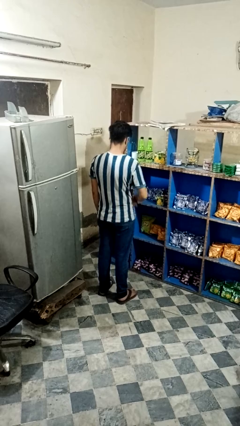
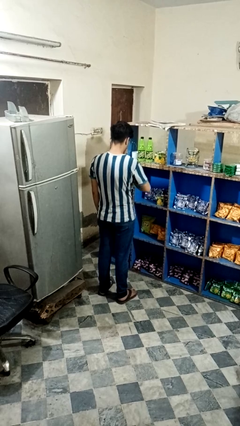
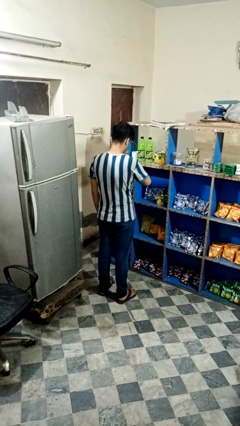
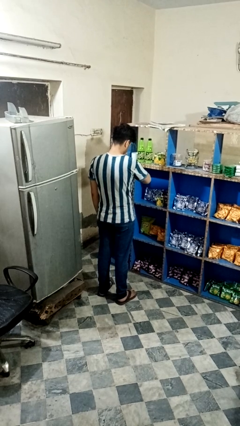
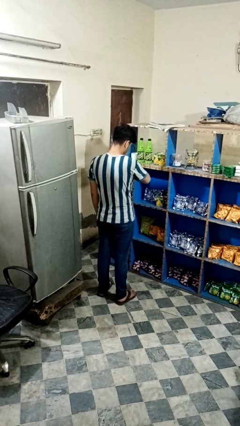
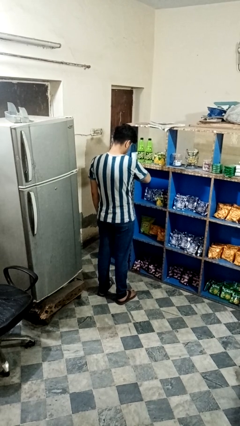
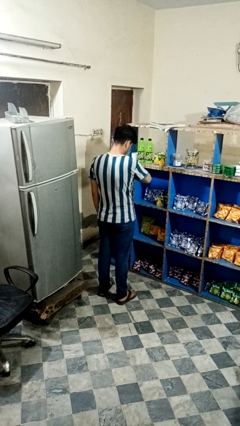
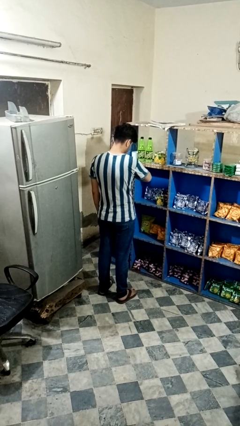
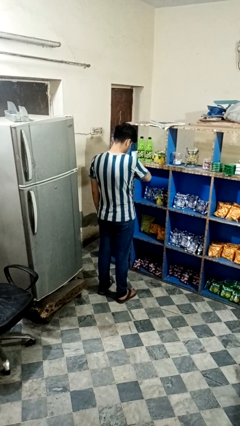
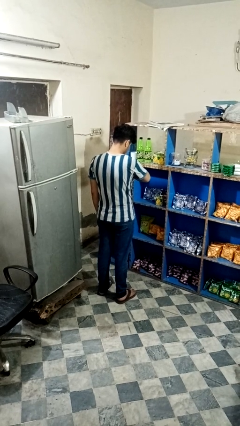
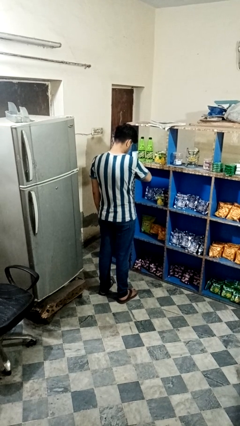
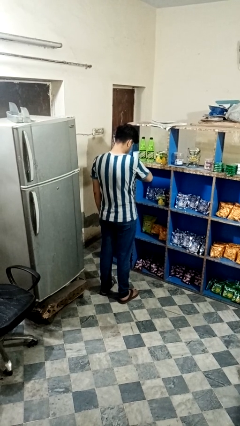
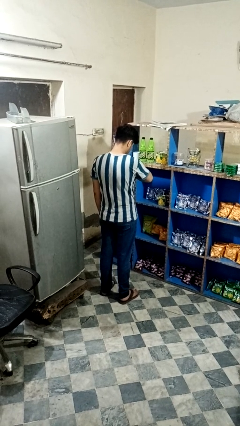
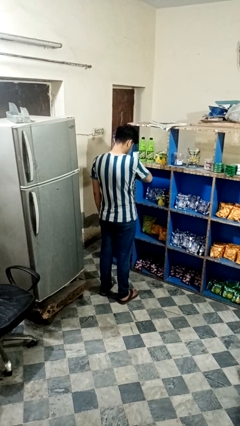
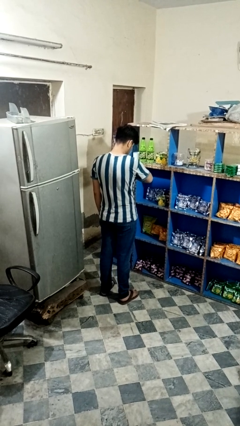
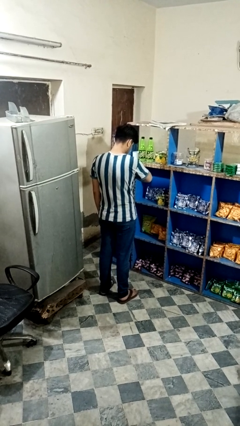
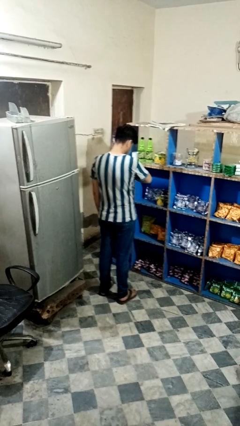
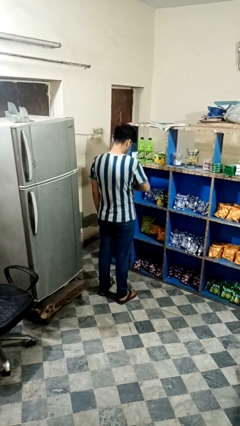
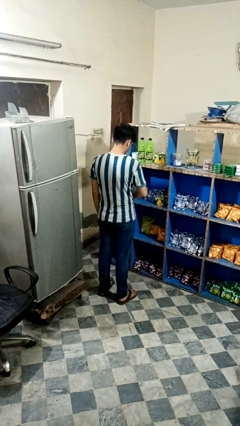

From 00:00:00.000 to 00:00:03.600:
person looks at wristwatch

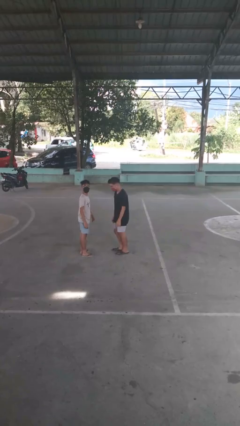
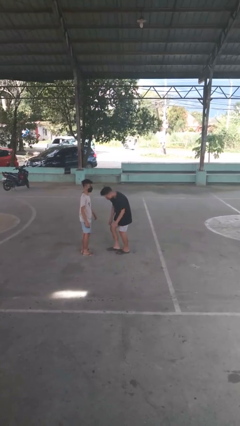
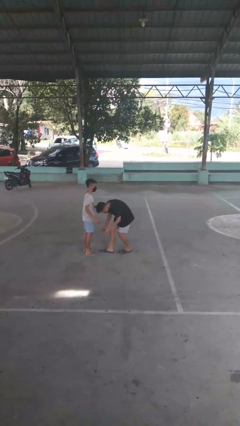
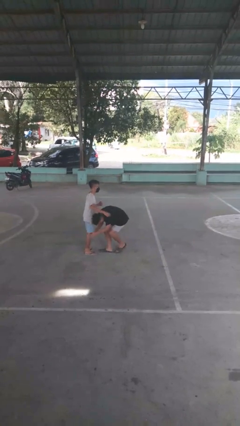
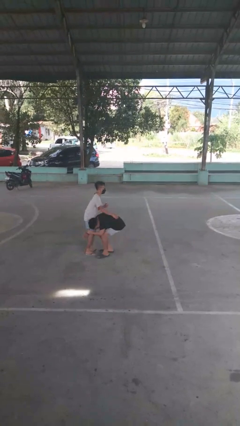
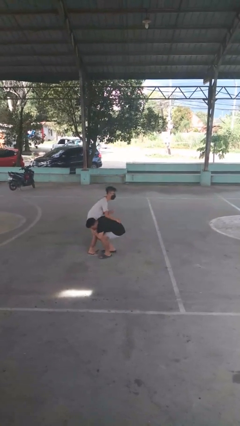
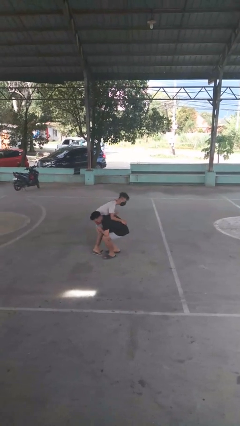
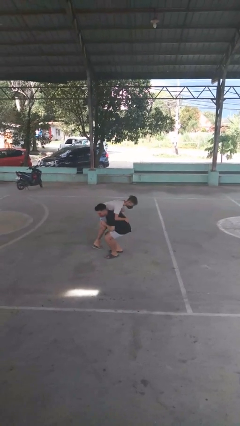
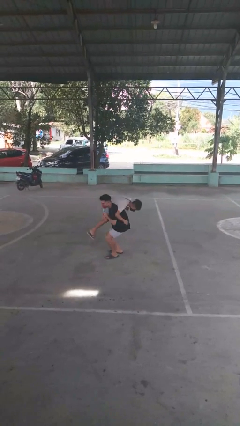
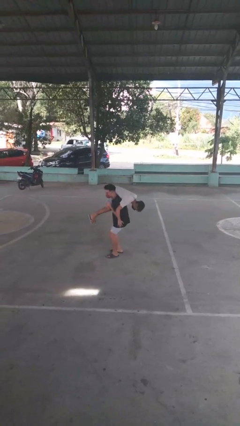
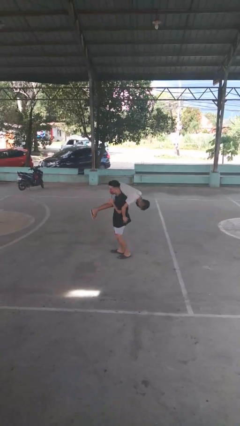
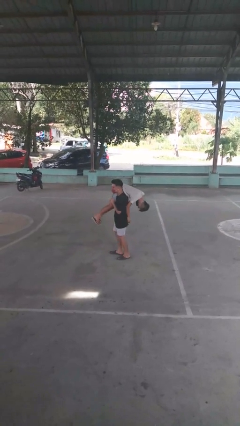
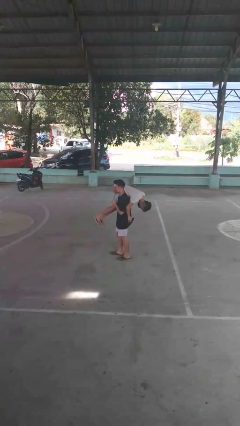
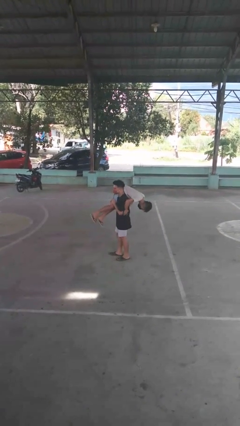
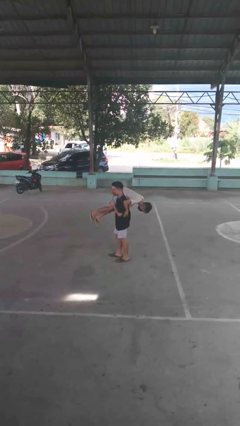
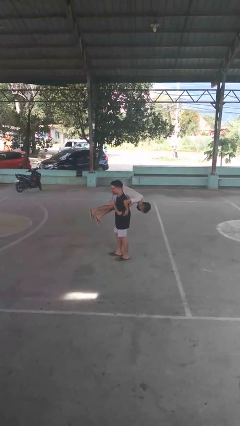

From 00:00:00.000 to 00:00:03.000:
person carries person over shoulder

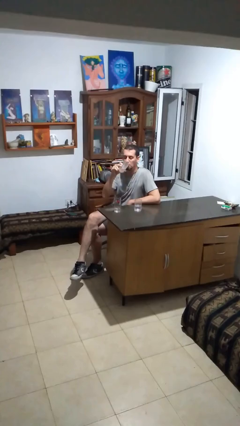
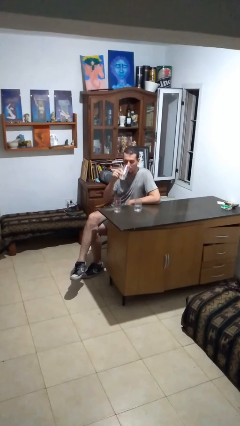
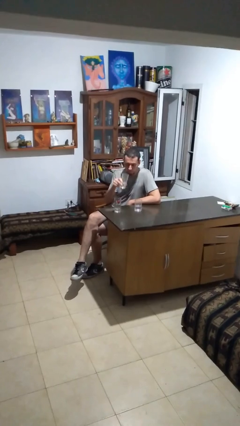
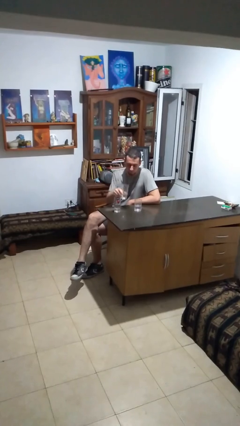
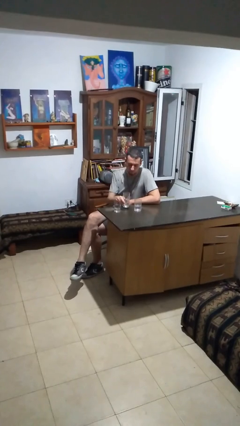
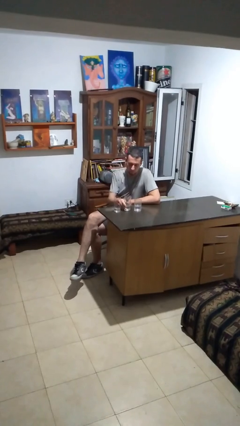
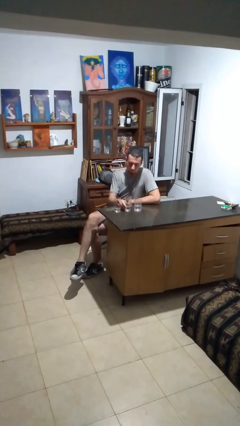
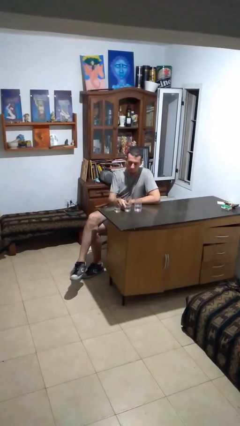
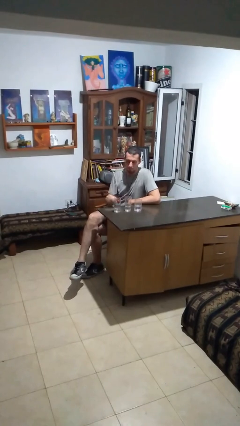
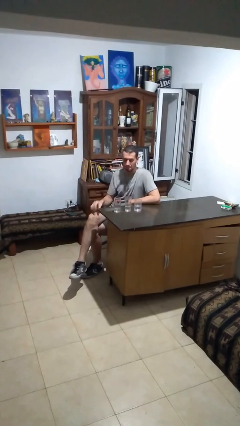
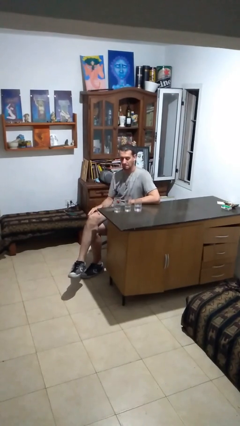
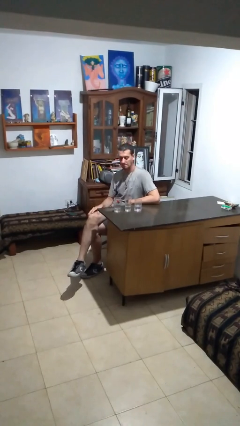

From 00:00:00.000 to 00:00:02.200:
person puts down object on table

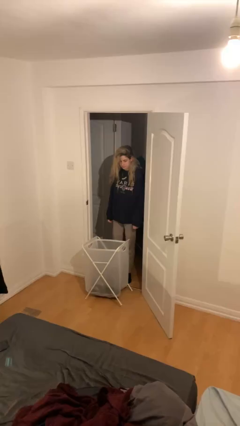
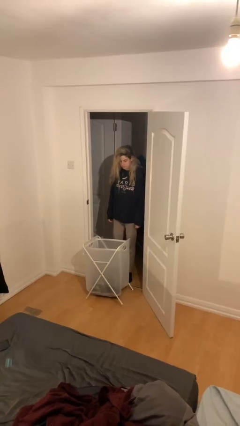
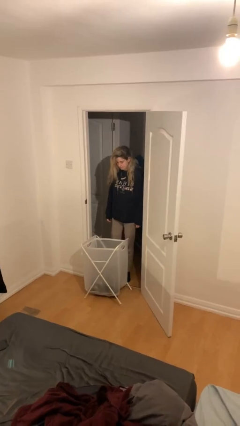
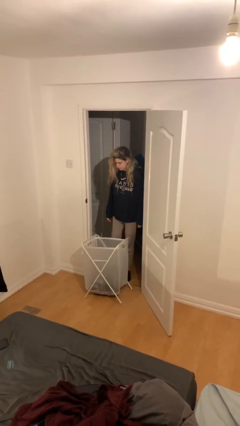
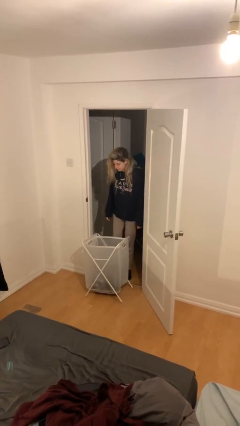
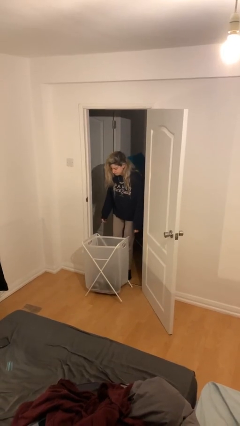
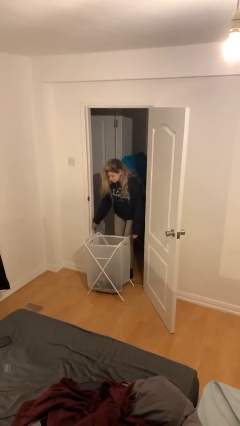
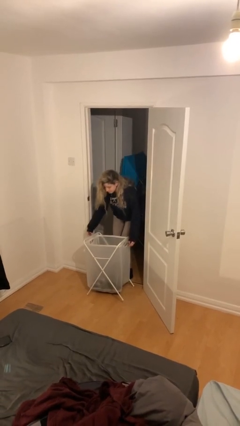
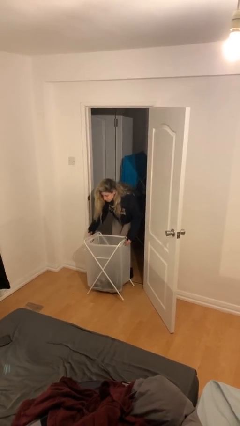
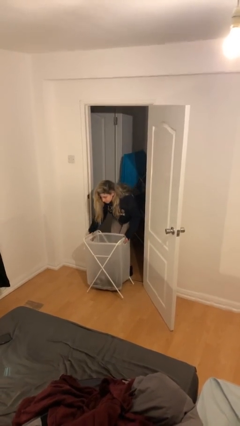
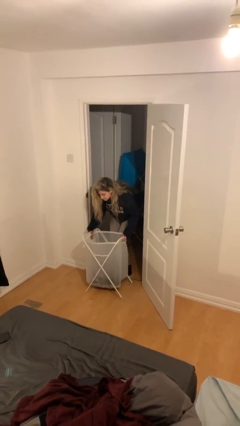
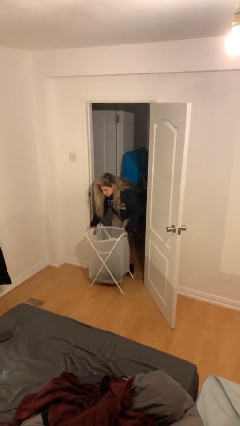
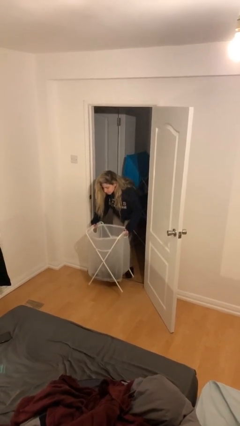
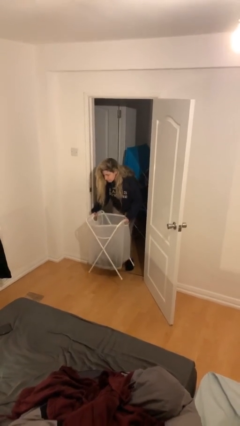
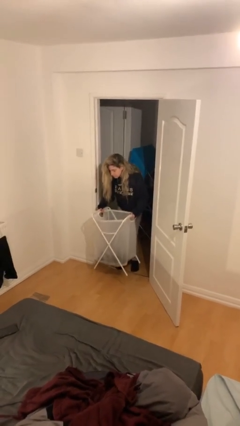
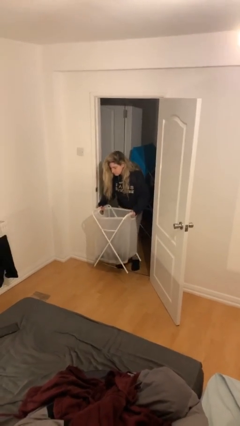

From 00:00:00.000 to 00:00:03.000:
person picks up object from floor

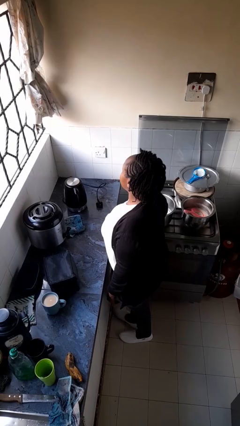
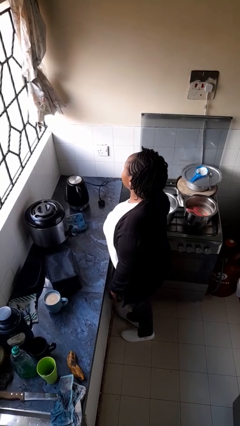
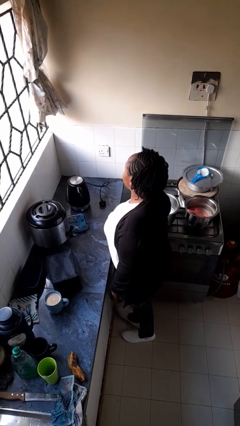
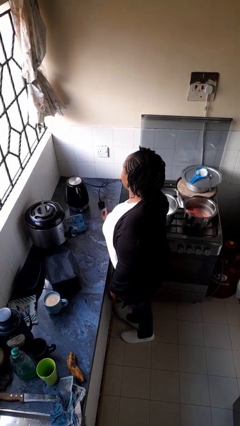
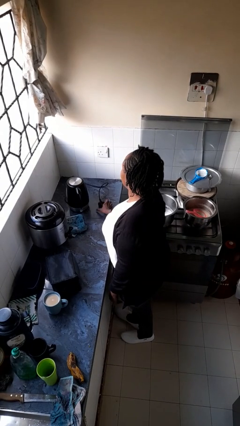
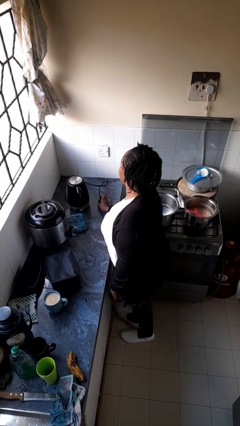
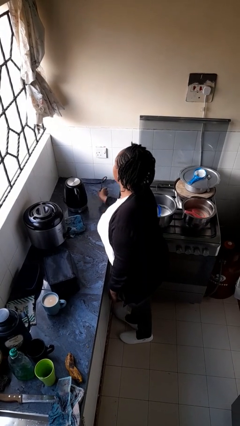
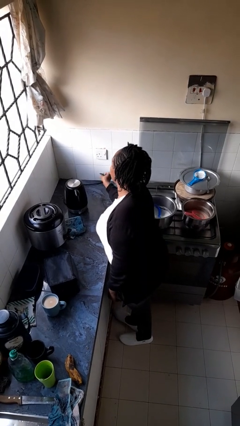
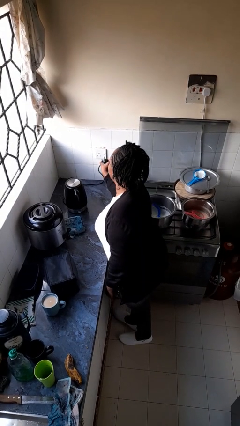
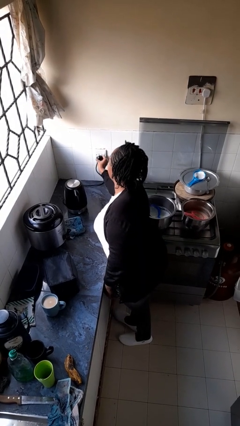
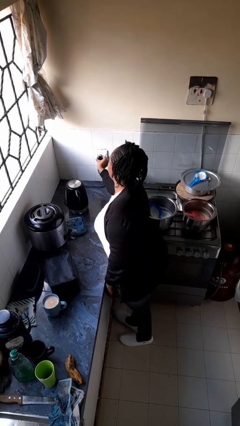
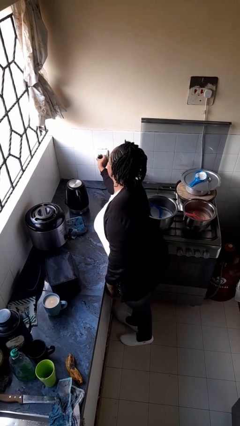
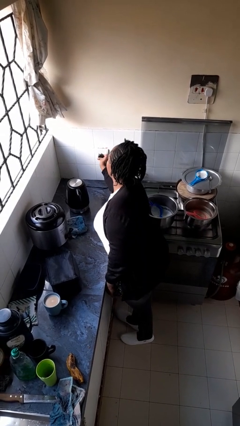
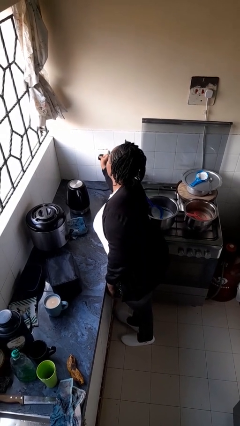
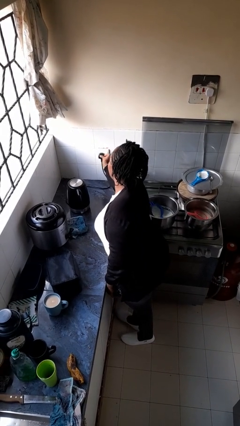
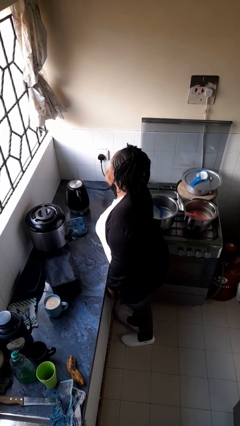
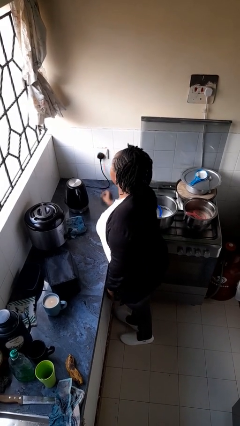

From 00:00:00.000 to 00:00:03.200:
person plugs into electrical socket

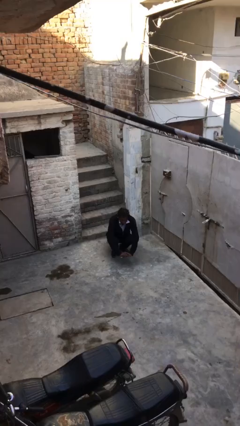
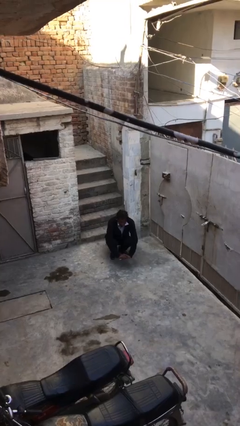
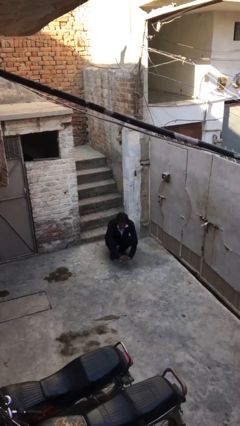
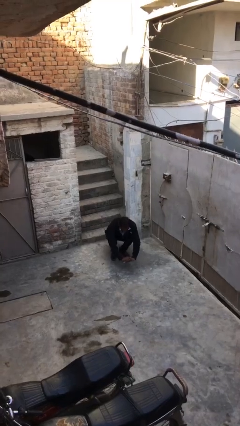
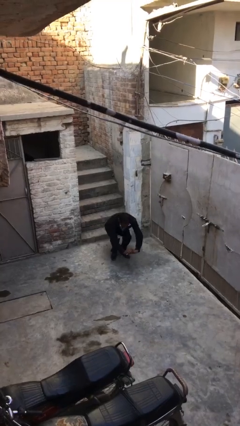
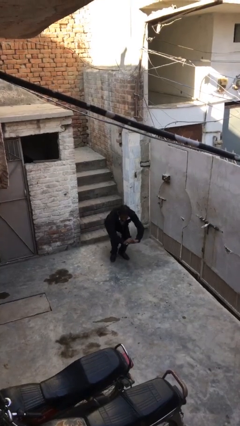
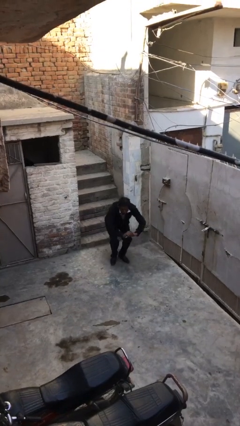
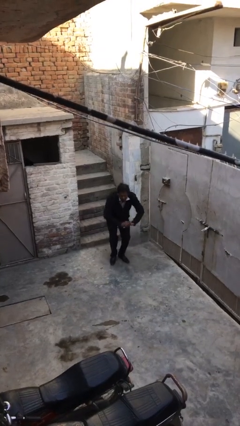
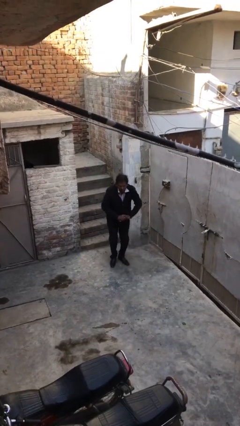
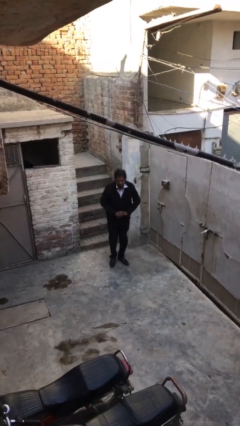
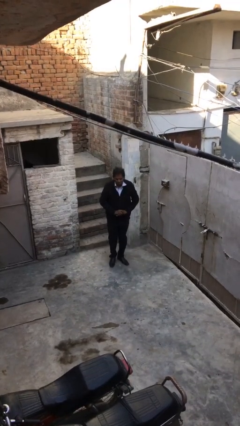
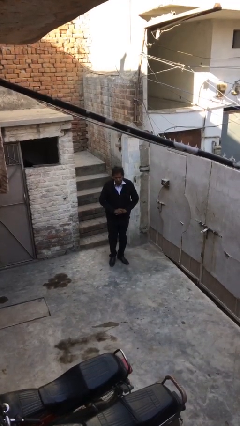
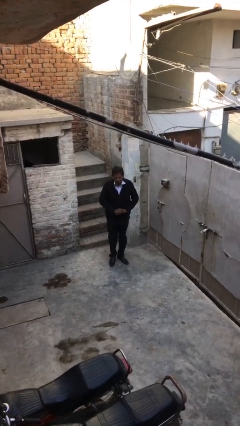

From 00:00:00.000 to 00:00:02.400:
person stands up
